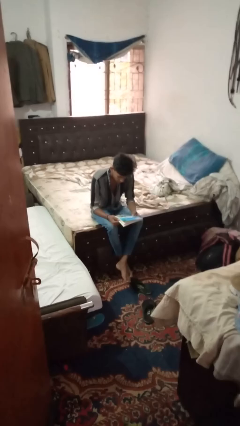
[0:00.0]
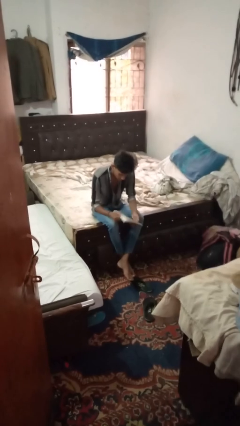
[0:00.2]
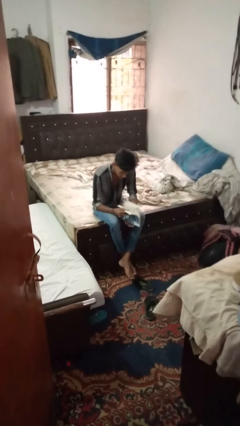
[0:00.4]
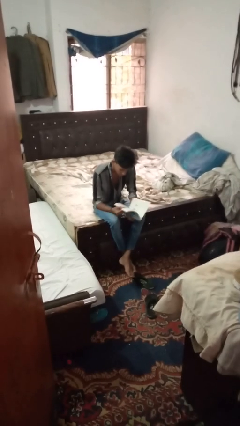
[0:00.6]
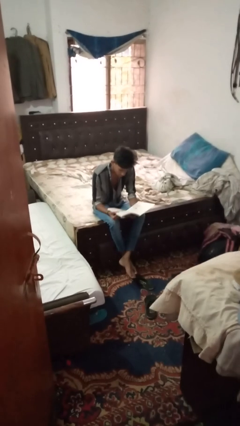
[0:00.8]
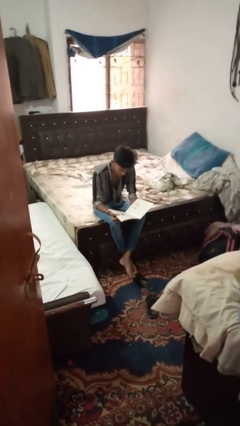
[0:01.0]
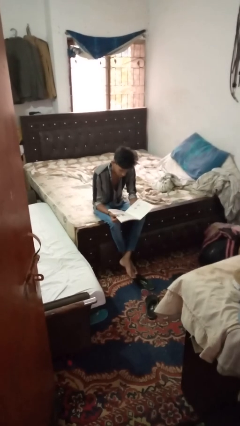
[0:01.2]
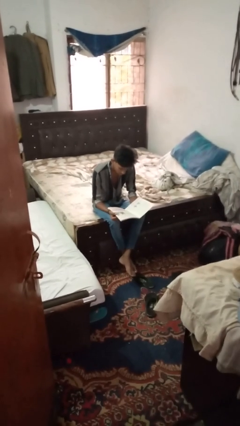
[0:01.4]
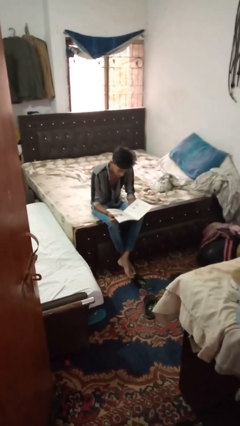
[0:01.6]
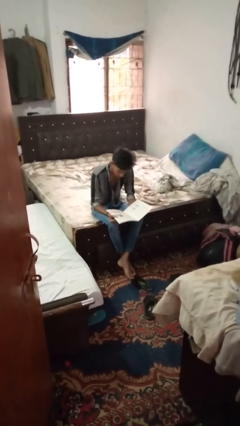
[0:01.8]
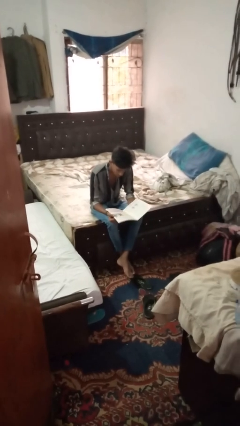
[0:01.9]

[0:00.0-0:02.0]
person reads book

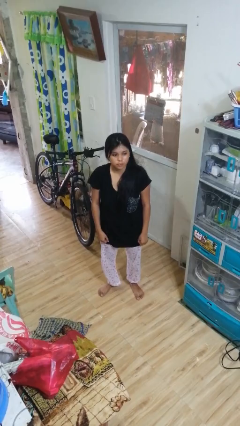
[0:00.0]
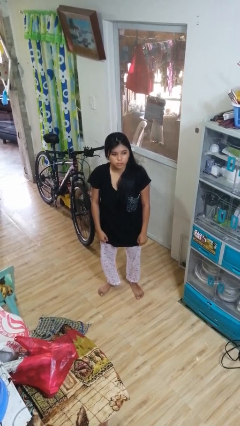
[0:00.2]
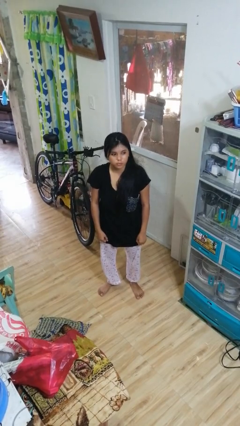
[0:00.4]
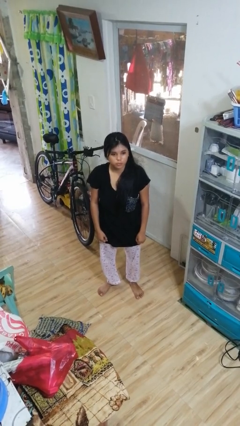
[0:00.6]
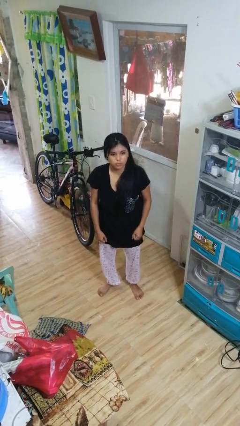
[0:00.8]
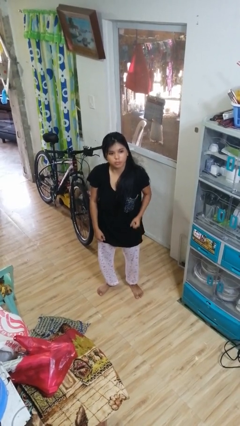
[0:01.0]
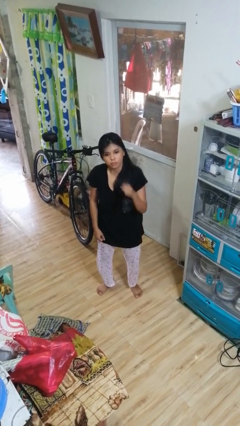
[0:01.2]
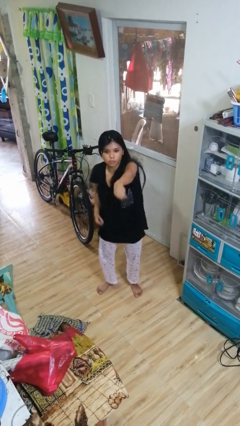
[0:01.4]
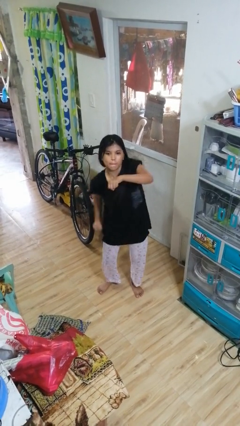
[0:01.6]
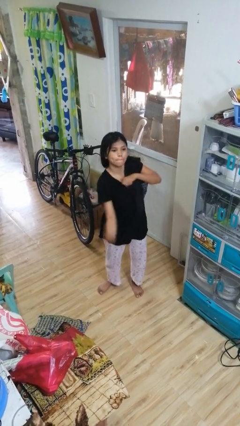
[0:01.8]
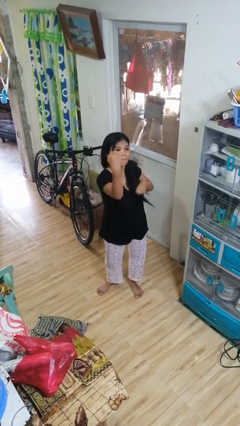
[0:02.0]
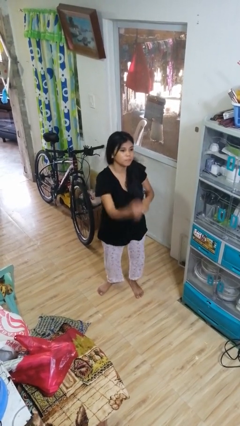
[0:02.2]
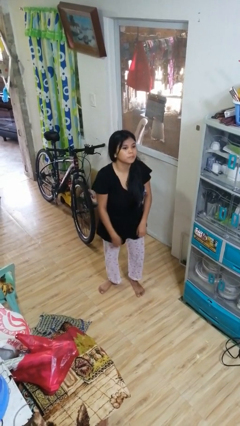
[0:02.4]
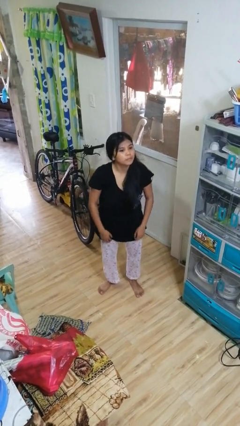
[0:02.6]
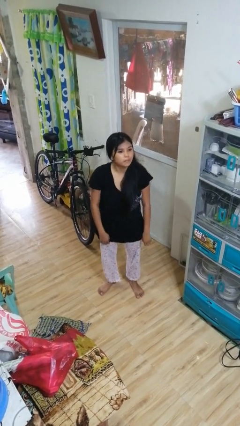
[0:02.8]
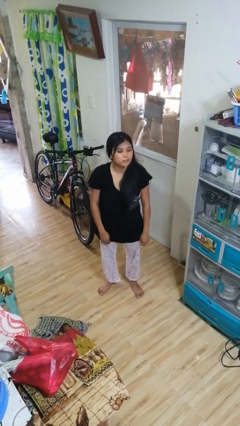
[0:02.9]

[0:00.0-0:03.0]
person punches

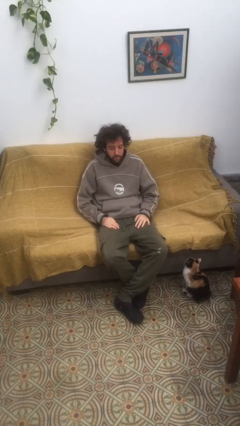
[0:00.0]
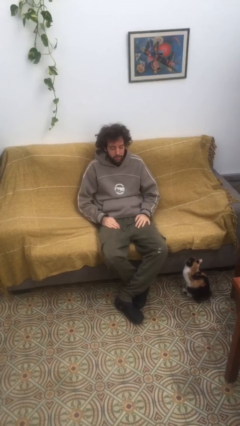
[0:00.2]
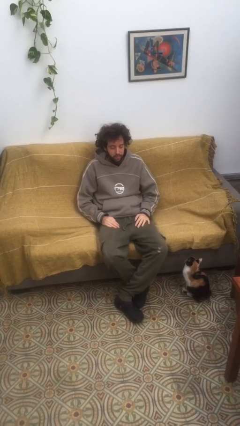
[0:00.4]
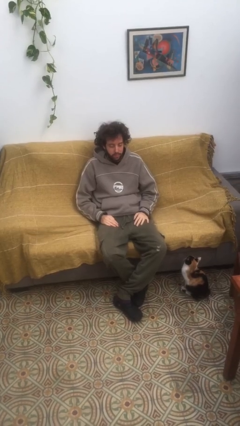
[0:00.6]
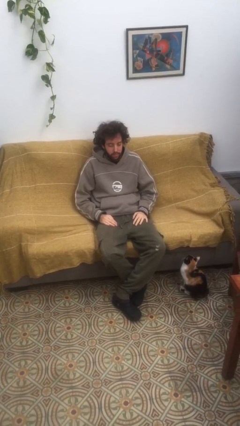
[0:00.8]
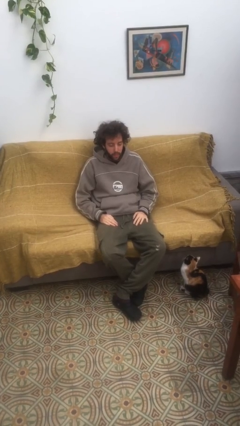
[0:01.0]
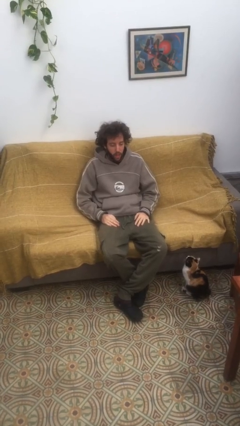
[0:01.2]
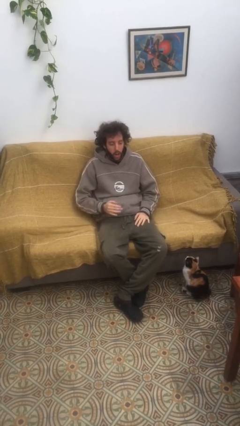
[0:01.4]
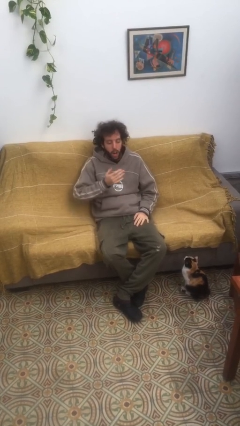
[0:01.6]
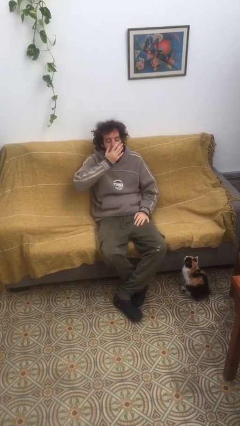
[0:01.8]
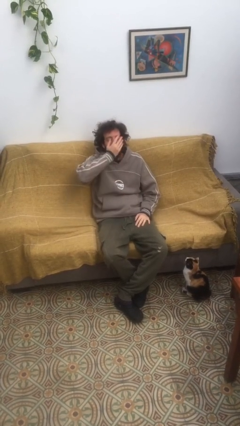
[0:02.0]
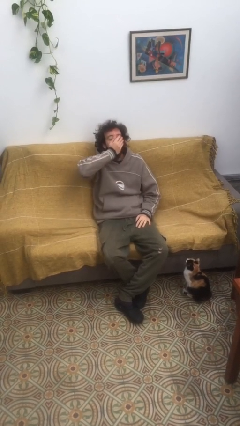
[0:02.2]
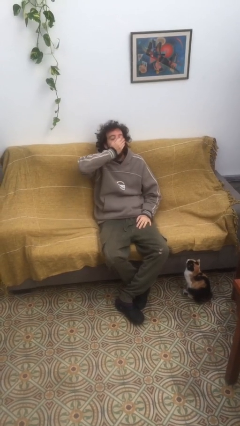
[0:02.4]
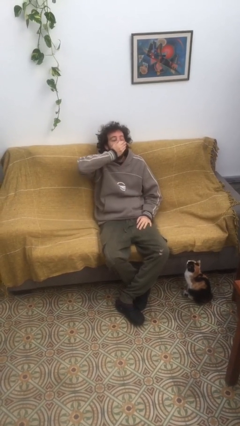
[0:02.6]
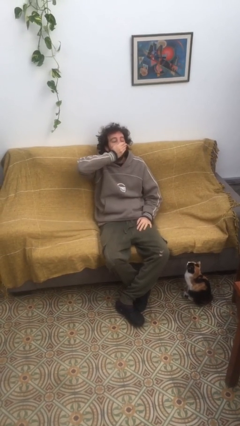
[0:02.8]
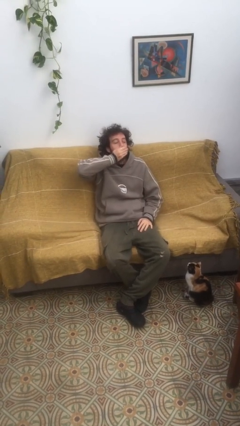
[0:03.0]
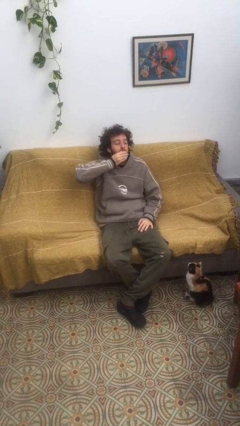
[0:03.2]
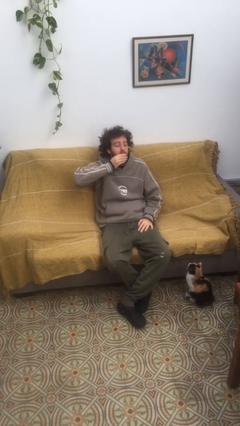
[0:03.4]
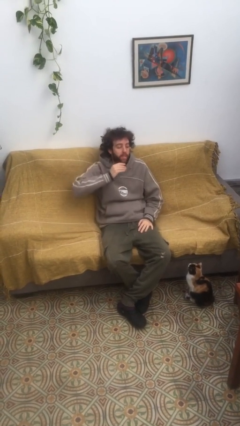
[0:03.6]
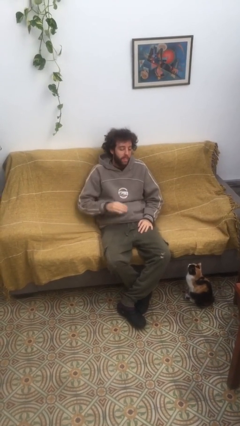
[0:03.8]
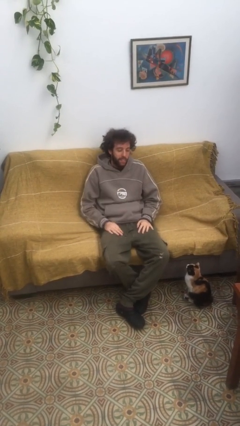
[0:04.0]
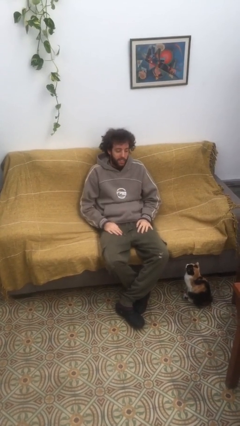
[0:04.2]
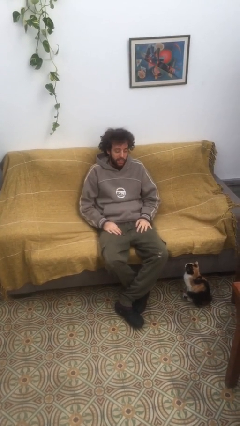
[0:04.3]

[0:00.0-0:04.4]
person yawns

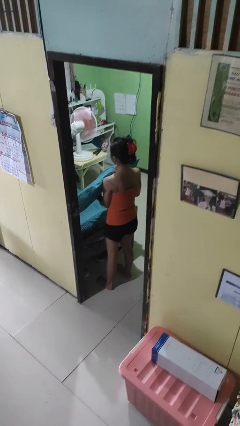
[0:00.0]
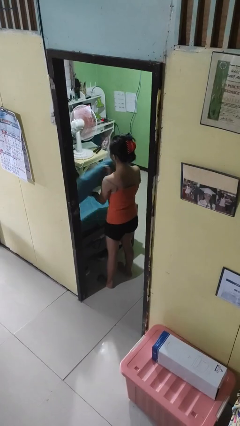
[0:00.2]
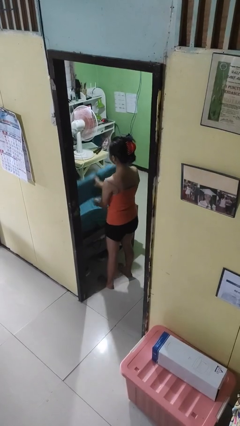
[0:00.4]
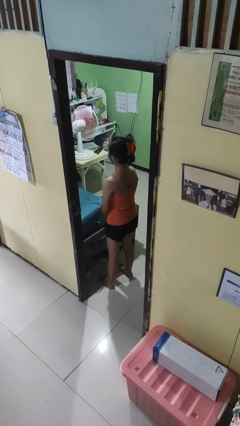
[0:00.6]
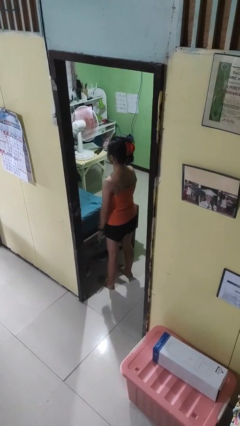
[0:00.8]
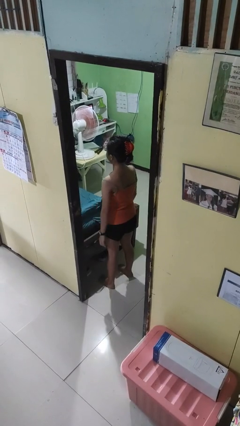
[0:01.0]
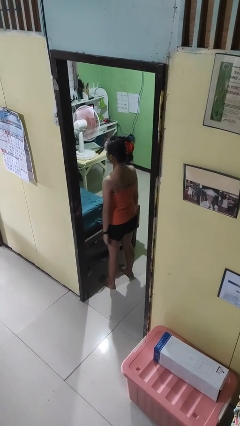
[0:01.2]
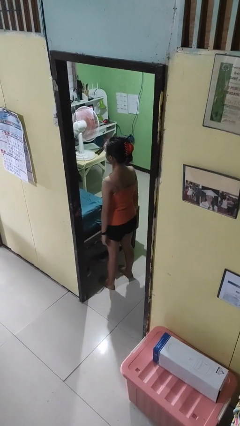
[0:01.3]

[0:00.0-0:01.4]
person puts down object on bed

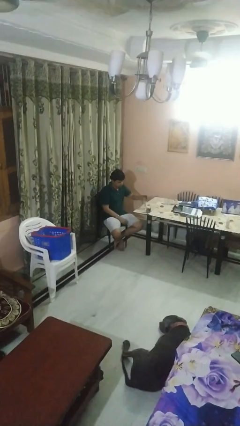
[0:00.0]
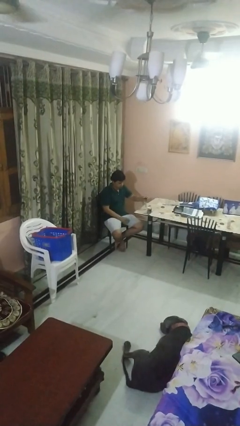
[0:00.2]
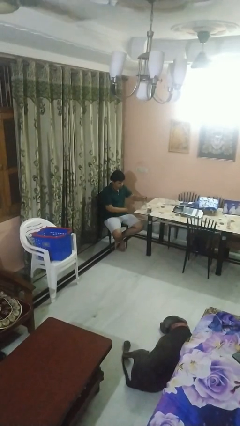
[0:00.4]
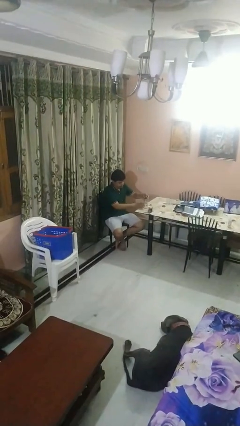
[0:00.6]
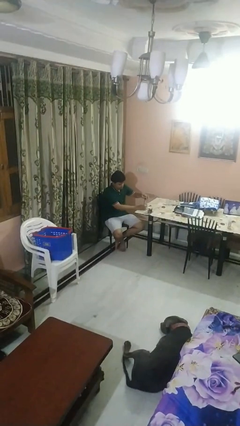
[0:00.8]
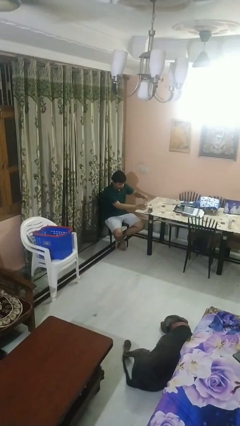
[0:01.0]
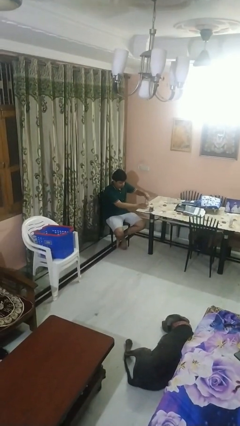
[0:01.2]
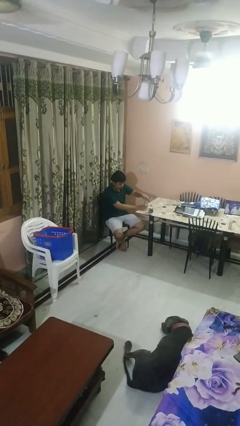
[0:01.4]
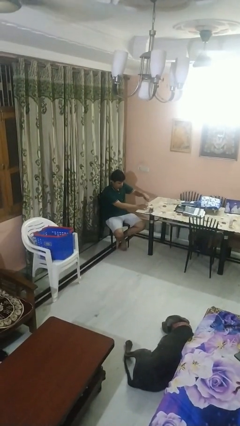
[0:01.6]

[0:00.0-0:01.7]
person screws lid to bottle

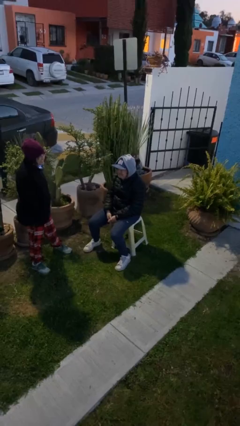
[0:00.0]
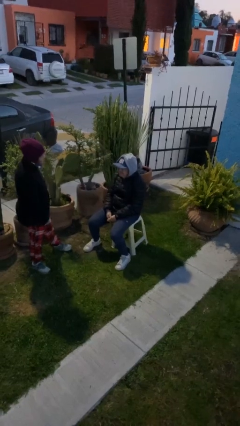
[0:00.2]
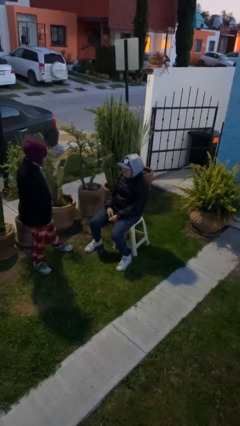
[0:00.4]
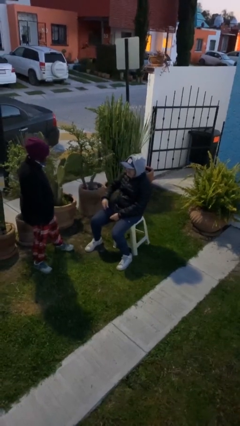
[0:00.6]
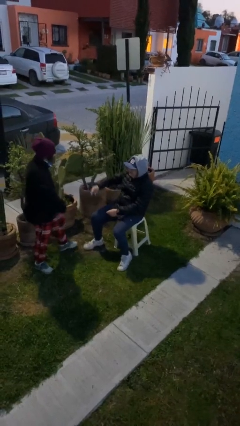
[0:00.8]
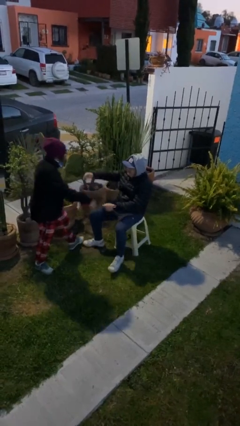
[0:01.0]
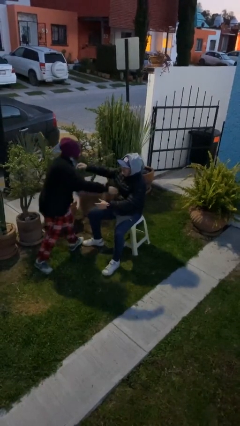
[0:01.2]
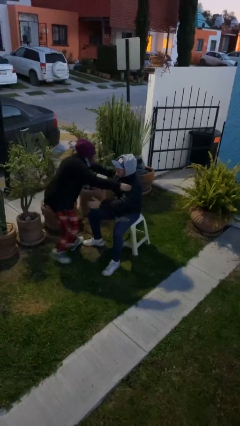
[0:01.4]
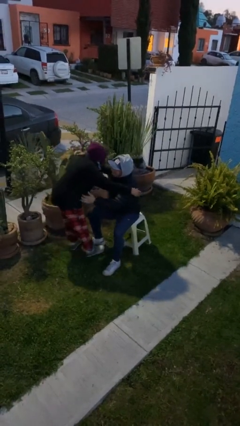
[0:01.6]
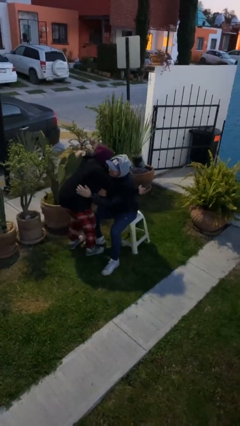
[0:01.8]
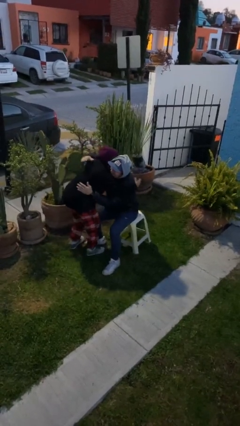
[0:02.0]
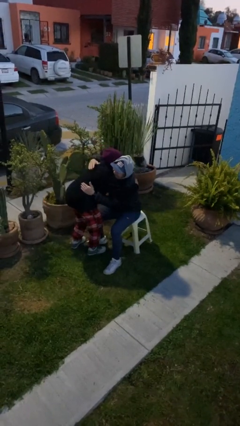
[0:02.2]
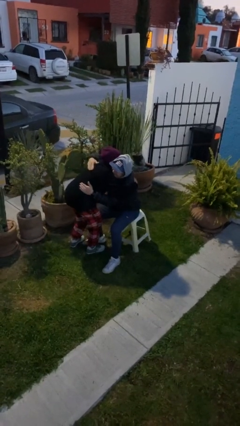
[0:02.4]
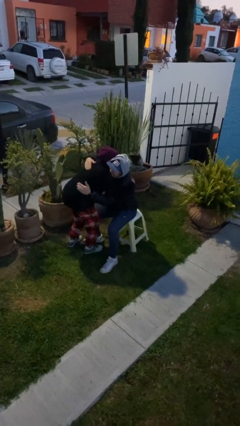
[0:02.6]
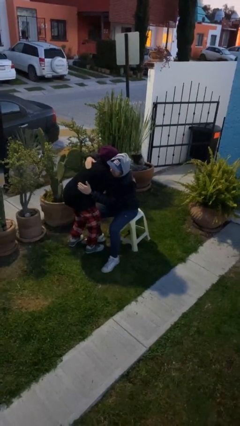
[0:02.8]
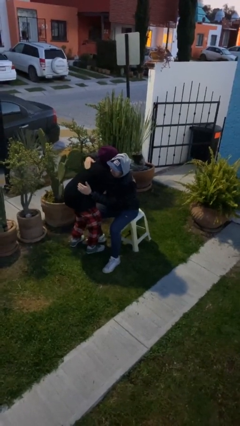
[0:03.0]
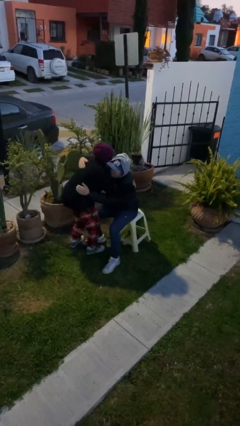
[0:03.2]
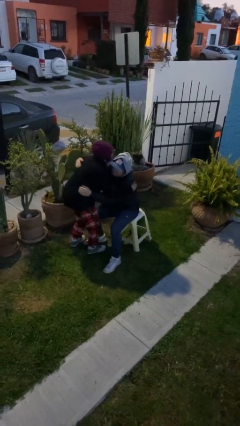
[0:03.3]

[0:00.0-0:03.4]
person embraces person

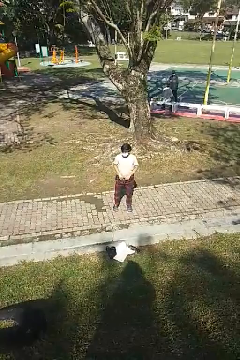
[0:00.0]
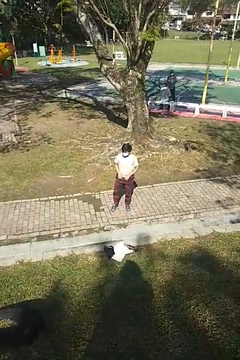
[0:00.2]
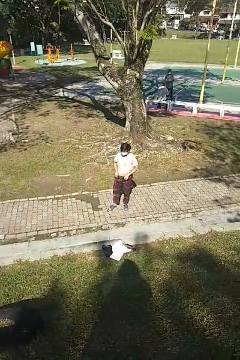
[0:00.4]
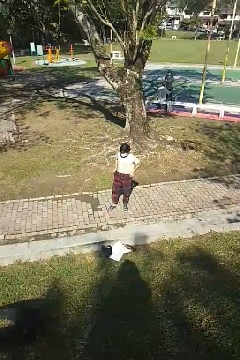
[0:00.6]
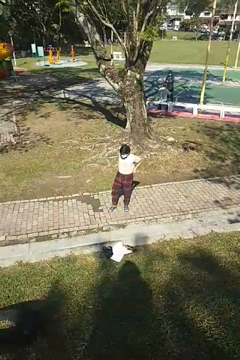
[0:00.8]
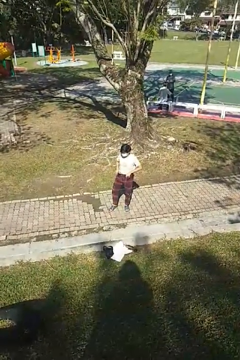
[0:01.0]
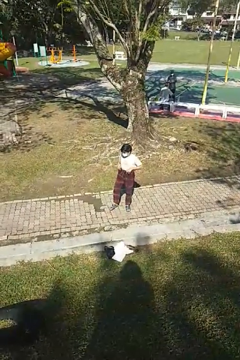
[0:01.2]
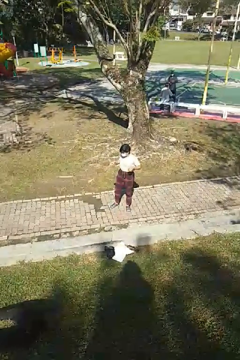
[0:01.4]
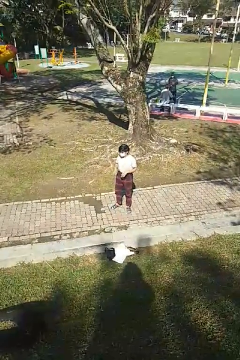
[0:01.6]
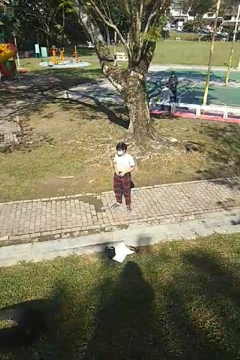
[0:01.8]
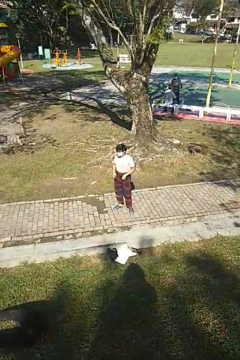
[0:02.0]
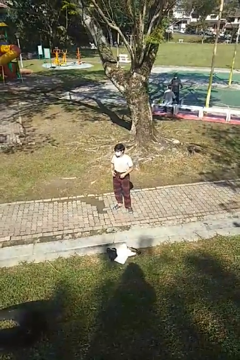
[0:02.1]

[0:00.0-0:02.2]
person hikes up pants
